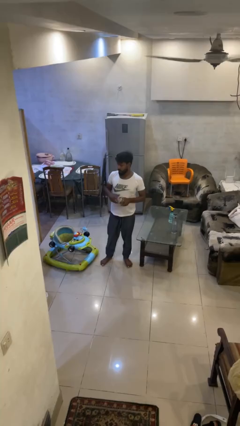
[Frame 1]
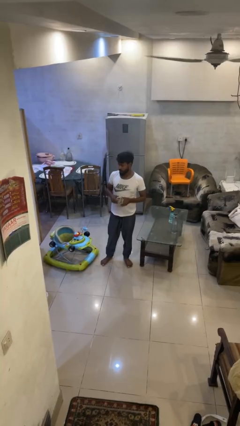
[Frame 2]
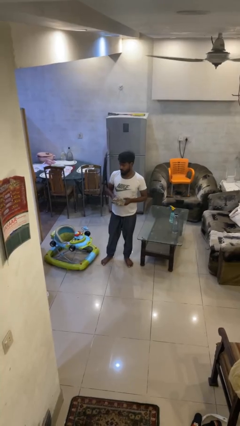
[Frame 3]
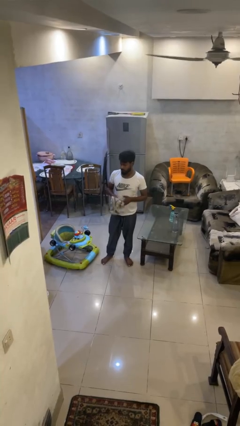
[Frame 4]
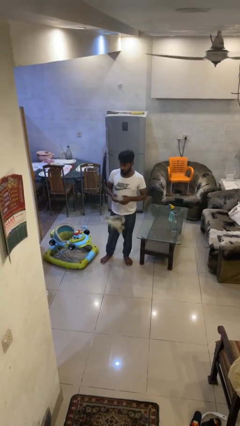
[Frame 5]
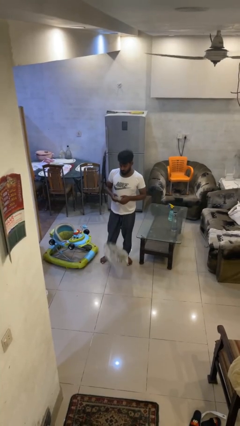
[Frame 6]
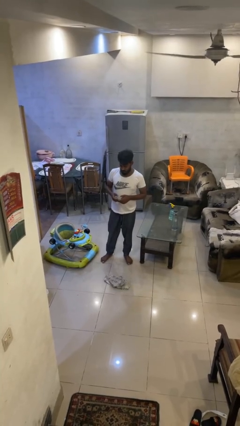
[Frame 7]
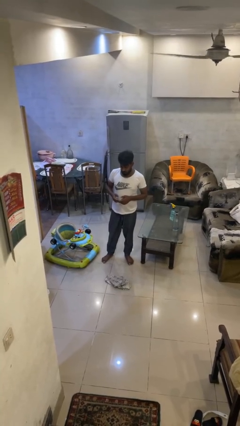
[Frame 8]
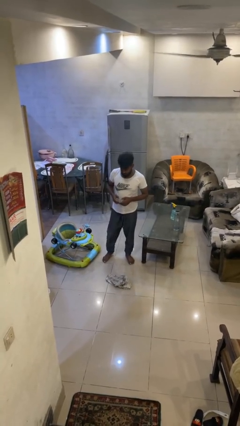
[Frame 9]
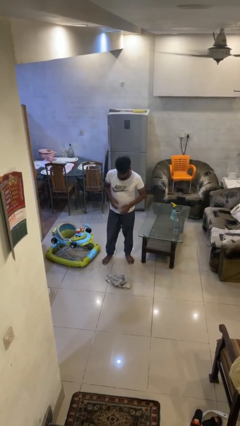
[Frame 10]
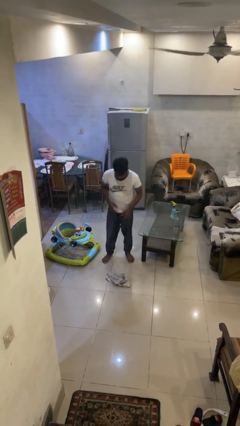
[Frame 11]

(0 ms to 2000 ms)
person drops object

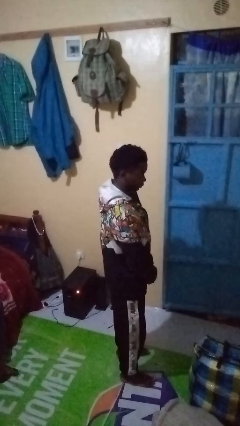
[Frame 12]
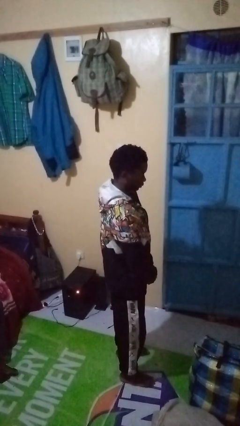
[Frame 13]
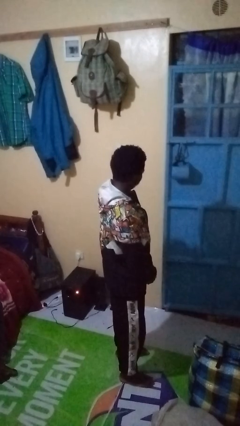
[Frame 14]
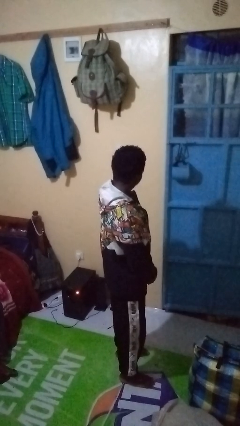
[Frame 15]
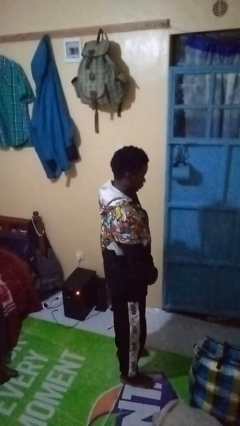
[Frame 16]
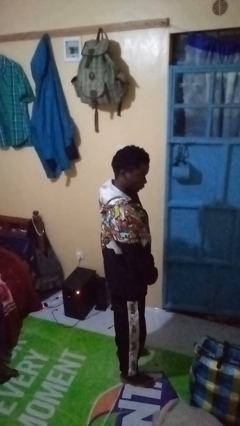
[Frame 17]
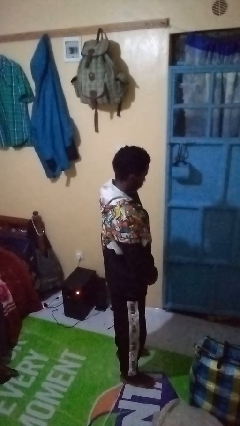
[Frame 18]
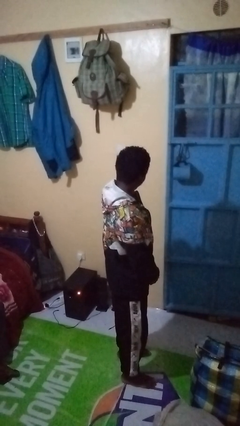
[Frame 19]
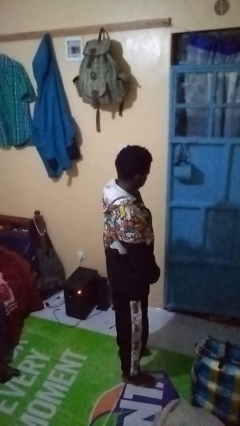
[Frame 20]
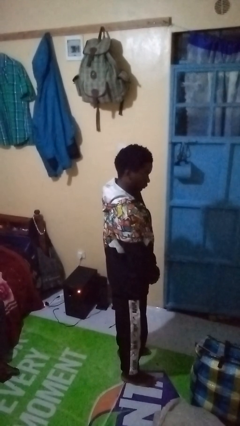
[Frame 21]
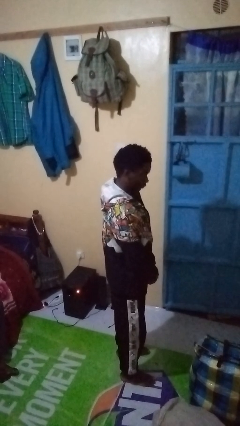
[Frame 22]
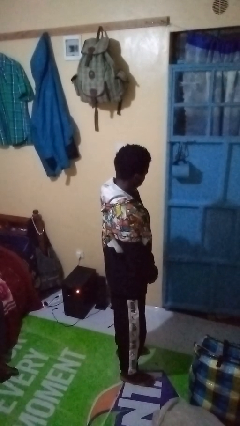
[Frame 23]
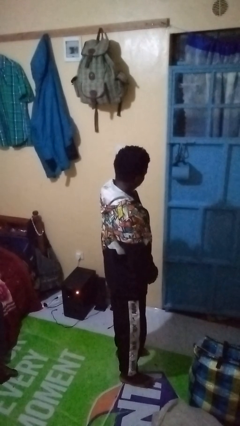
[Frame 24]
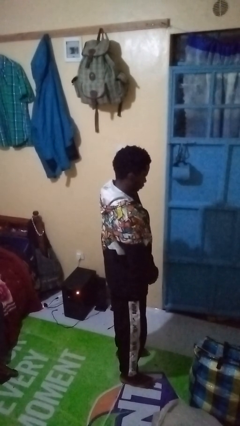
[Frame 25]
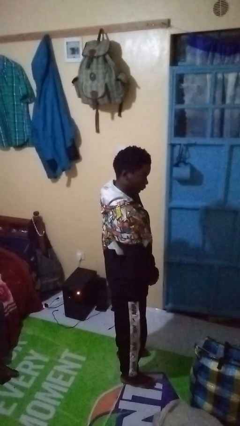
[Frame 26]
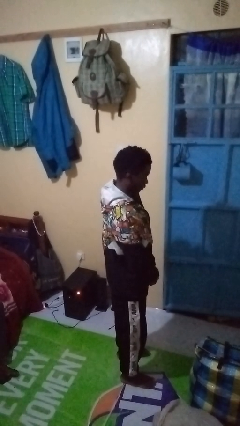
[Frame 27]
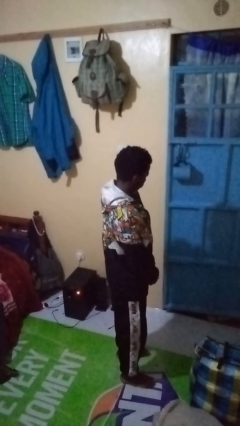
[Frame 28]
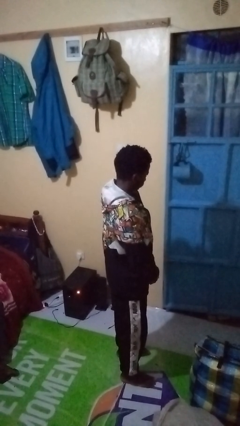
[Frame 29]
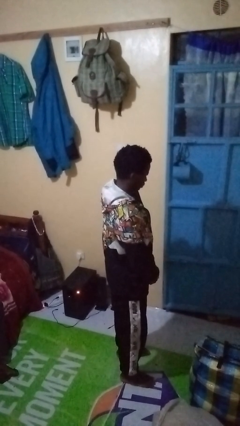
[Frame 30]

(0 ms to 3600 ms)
person shakes head

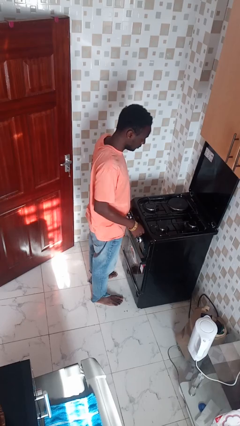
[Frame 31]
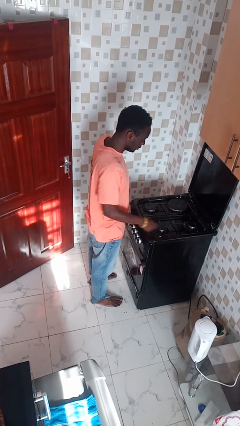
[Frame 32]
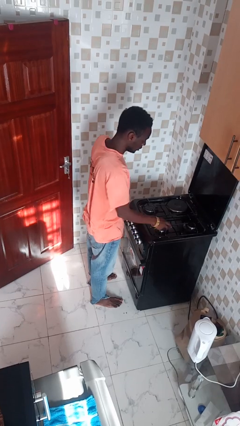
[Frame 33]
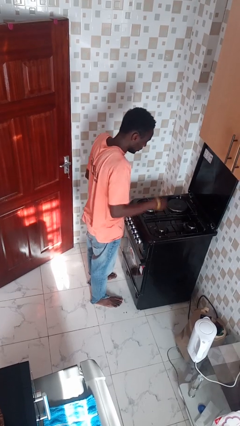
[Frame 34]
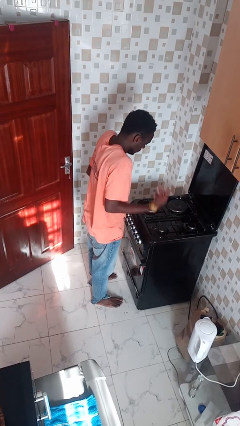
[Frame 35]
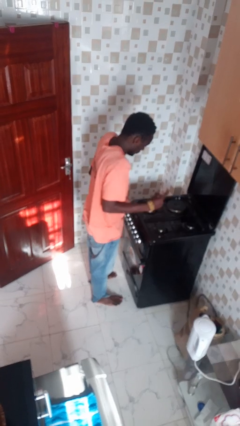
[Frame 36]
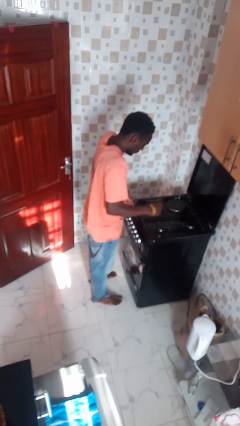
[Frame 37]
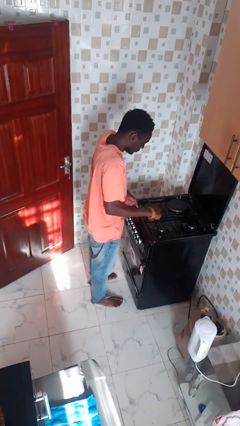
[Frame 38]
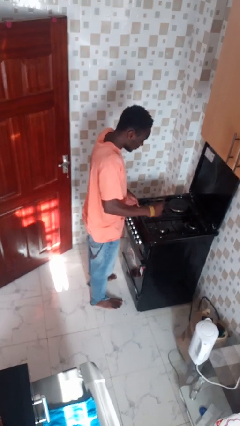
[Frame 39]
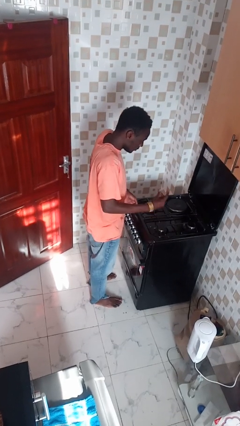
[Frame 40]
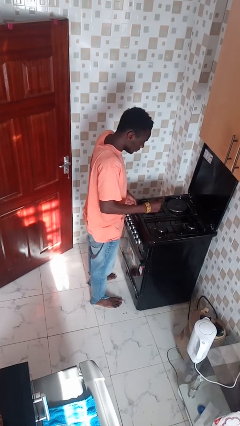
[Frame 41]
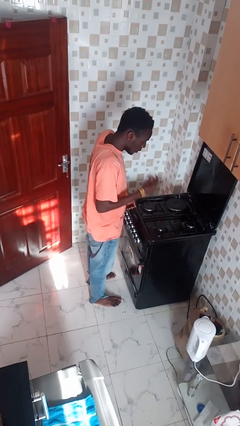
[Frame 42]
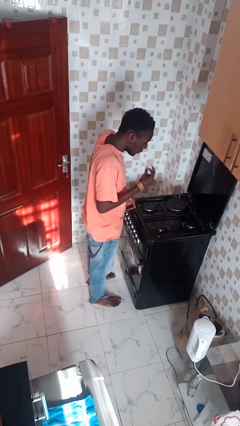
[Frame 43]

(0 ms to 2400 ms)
person burns hand

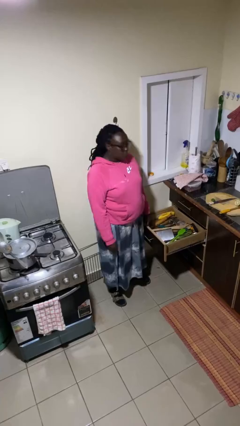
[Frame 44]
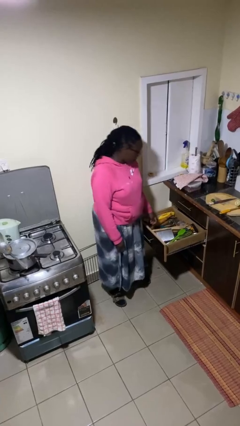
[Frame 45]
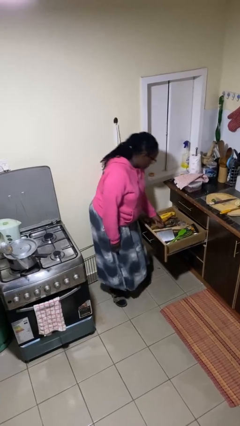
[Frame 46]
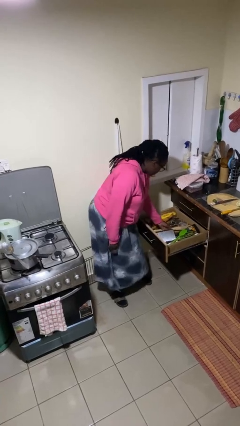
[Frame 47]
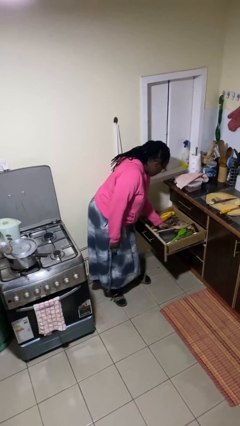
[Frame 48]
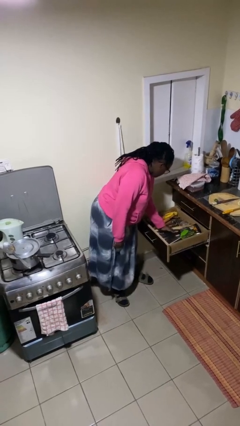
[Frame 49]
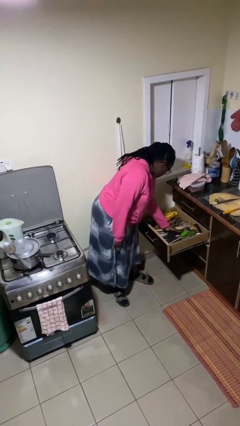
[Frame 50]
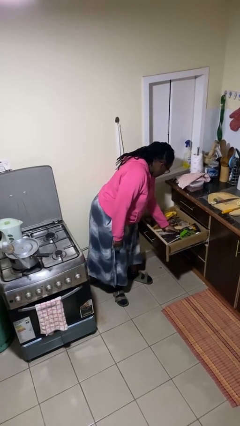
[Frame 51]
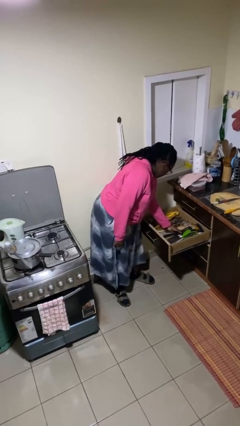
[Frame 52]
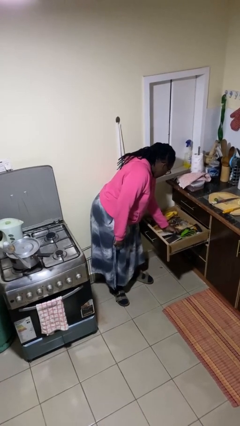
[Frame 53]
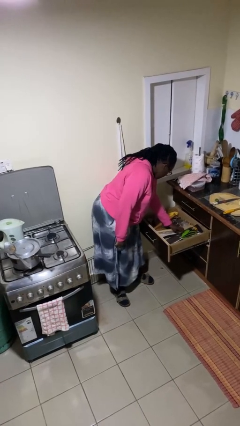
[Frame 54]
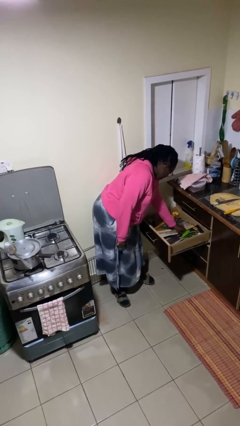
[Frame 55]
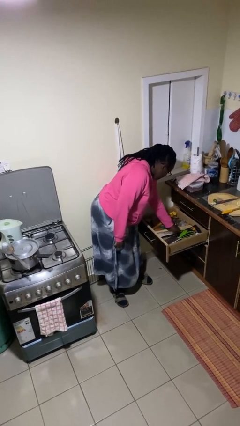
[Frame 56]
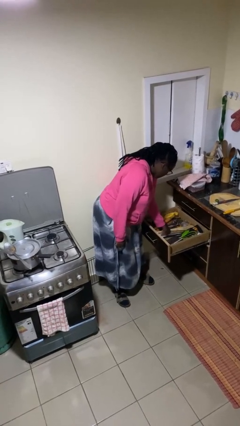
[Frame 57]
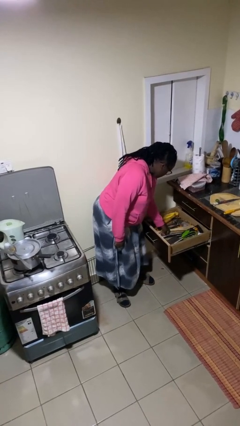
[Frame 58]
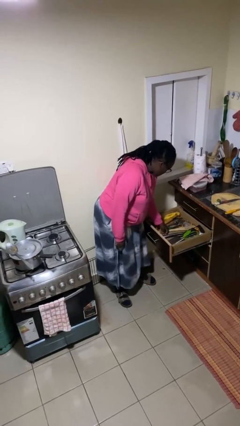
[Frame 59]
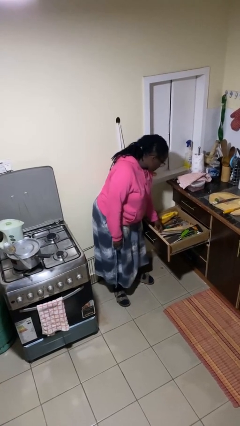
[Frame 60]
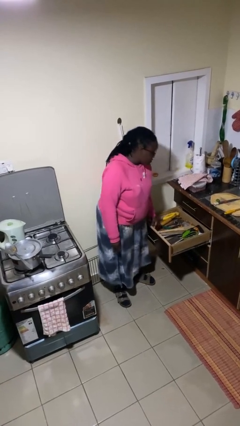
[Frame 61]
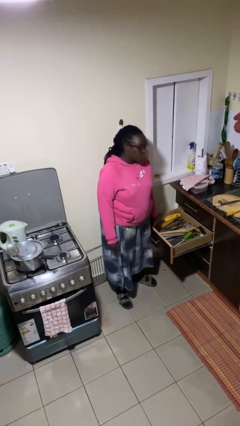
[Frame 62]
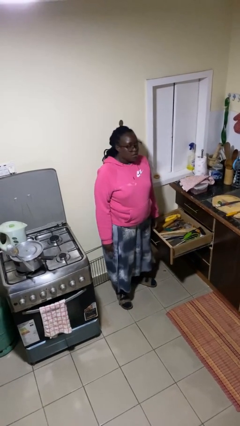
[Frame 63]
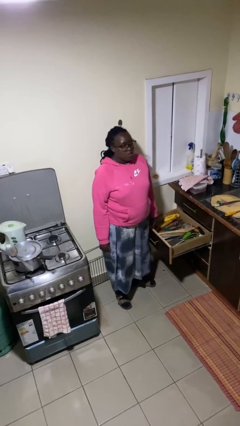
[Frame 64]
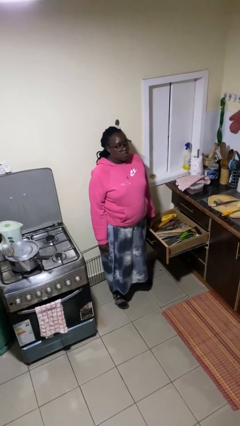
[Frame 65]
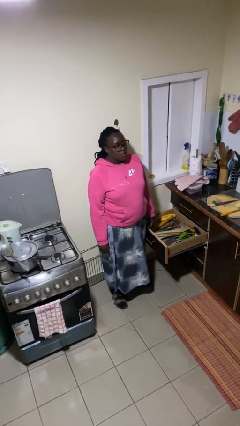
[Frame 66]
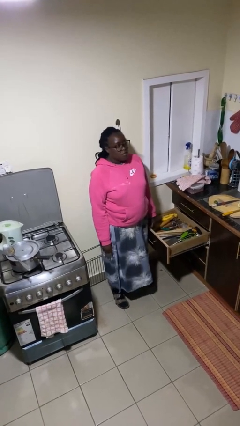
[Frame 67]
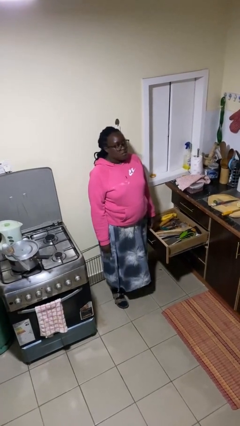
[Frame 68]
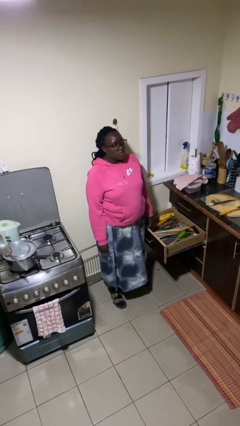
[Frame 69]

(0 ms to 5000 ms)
person searches in kitchen drawer

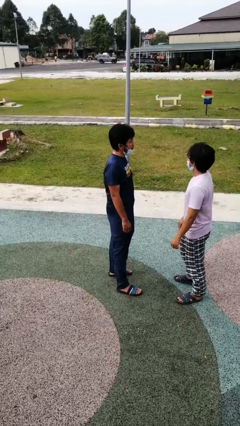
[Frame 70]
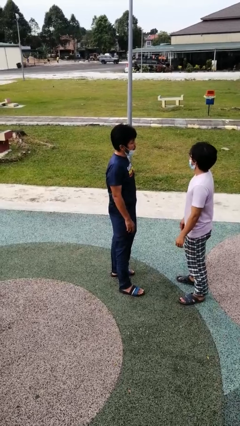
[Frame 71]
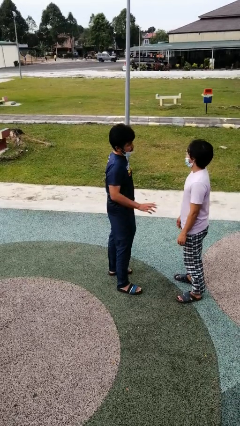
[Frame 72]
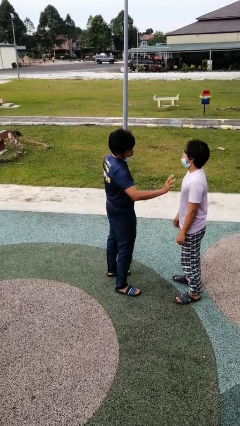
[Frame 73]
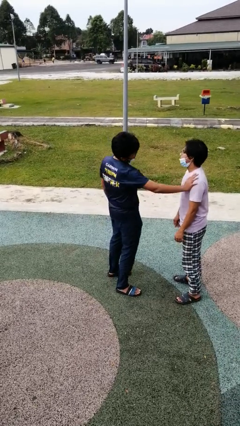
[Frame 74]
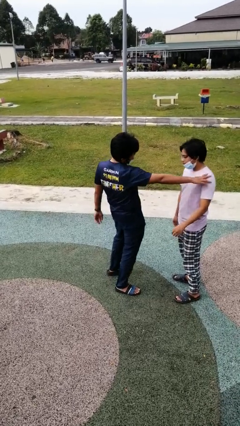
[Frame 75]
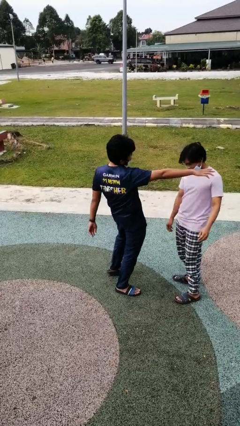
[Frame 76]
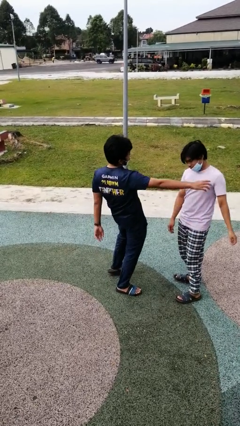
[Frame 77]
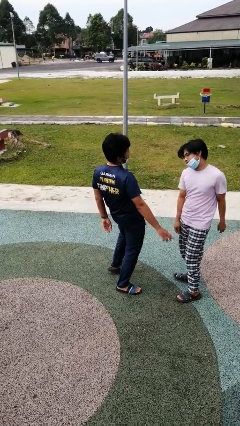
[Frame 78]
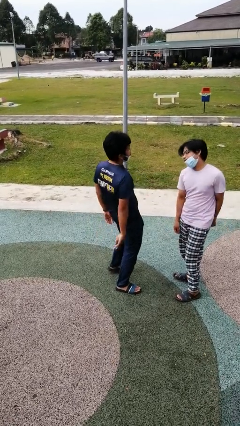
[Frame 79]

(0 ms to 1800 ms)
person shoves person

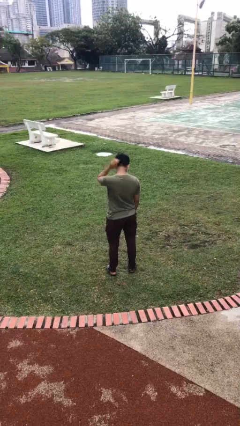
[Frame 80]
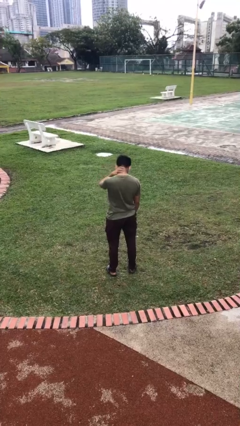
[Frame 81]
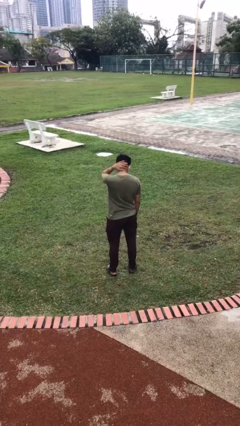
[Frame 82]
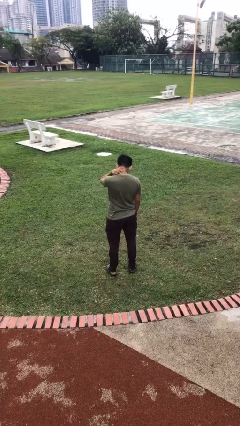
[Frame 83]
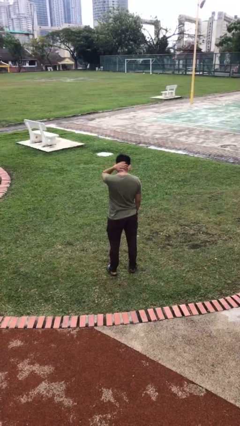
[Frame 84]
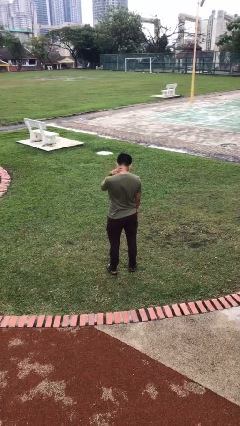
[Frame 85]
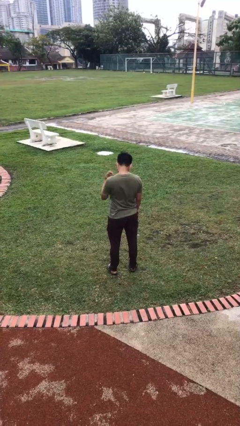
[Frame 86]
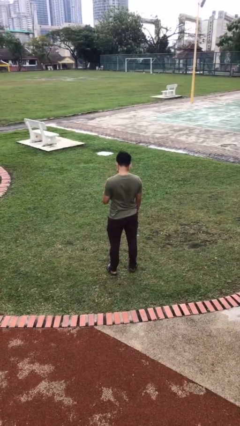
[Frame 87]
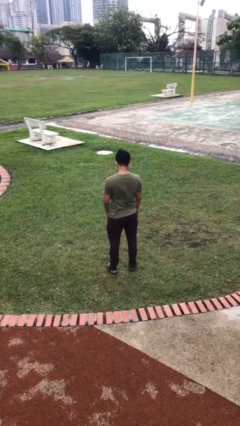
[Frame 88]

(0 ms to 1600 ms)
person rubs neck

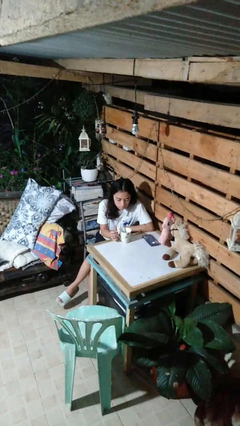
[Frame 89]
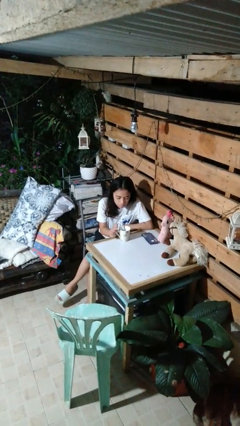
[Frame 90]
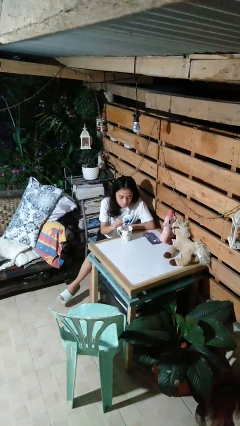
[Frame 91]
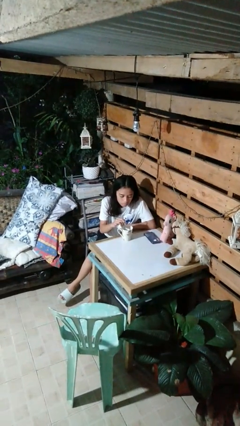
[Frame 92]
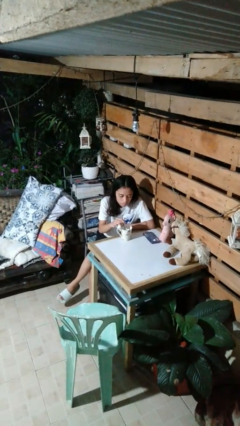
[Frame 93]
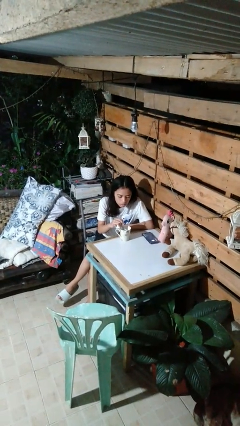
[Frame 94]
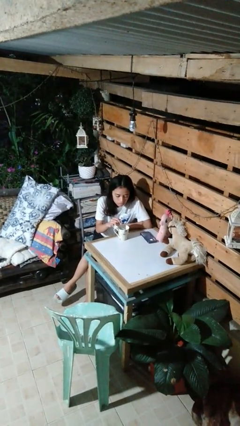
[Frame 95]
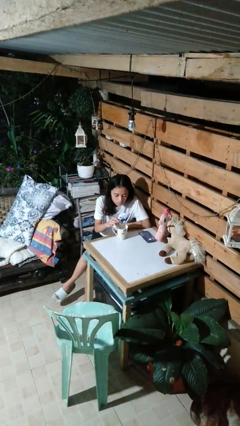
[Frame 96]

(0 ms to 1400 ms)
person stirs mug
